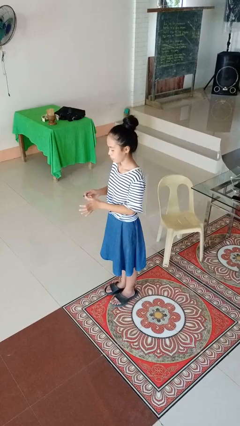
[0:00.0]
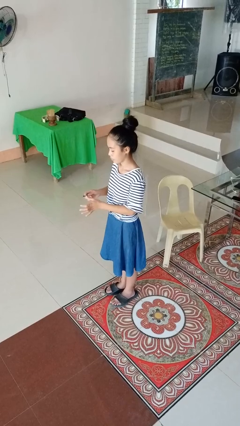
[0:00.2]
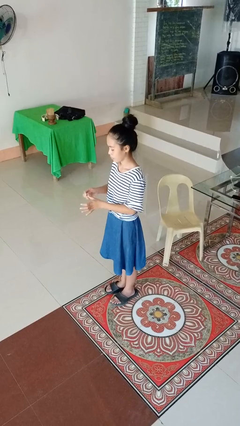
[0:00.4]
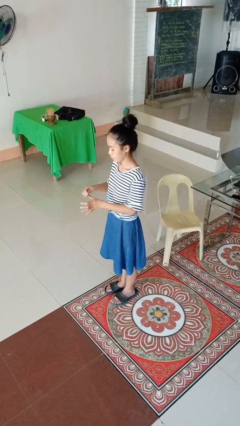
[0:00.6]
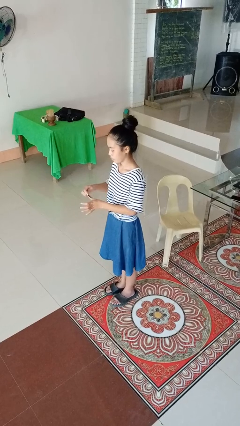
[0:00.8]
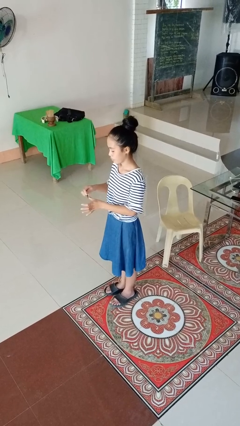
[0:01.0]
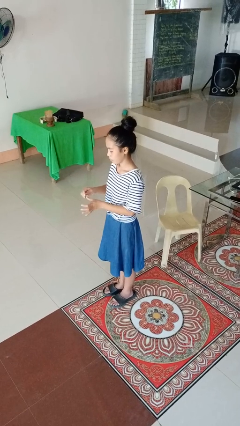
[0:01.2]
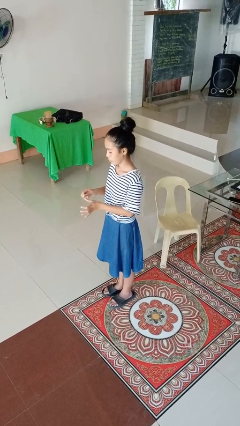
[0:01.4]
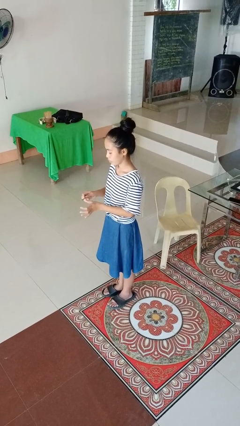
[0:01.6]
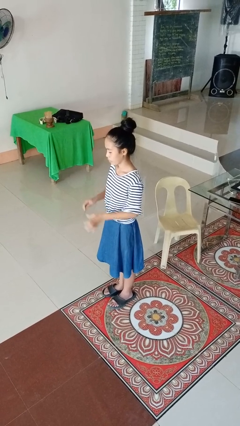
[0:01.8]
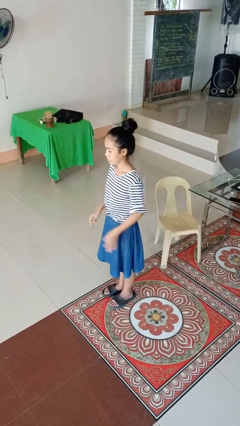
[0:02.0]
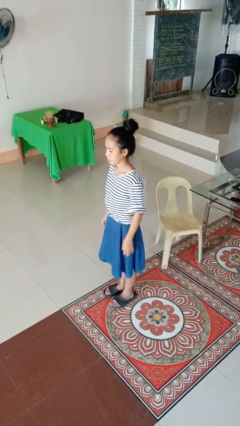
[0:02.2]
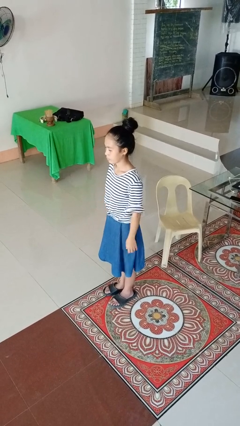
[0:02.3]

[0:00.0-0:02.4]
person files fingernails

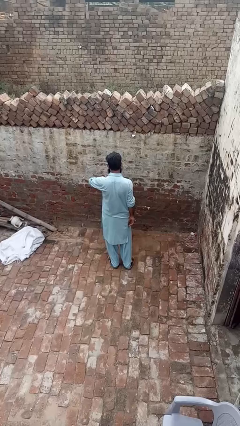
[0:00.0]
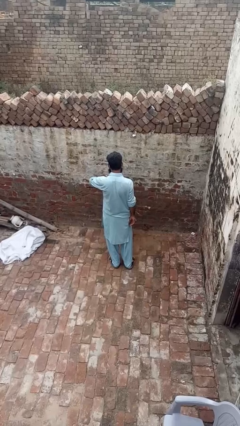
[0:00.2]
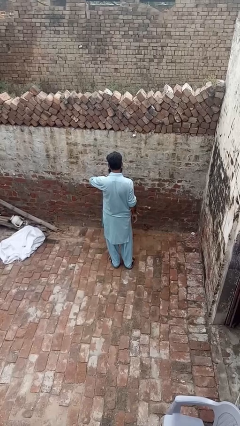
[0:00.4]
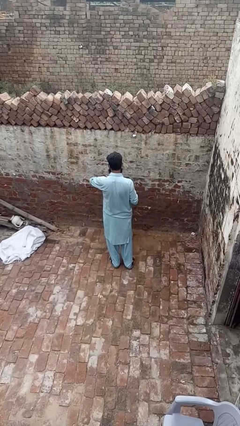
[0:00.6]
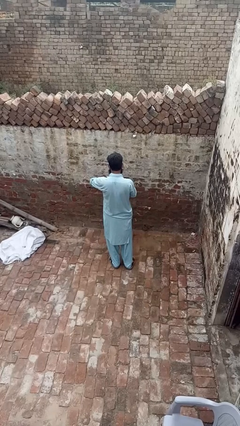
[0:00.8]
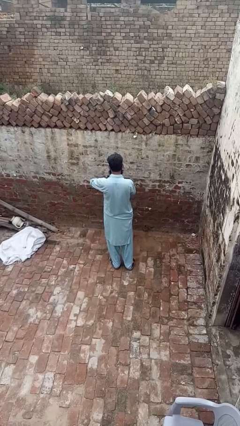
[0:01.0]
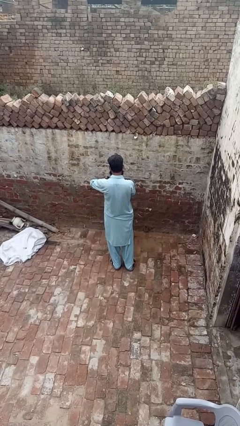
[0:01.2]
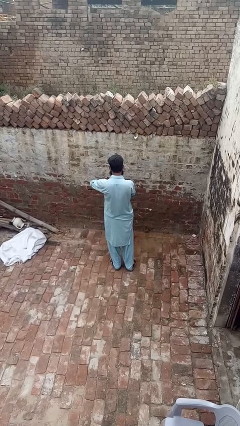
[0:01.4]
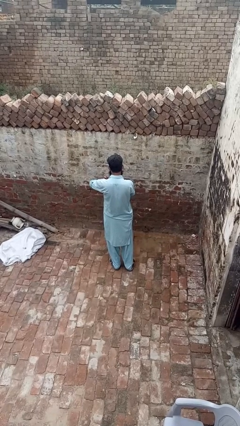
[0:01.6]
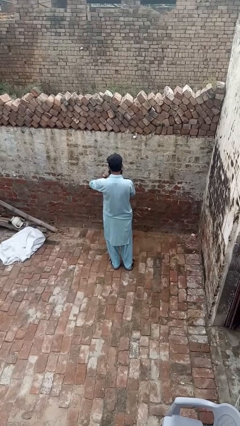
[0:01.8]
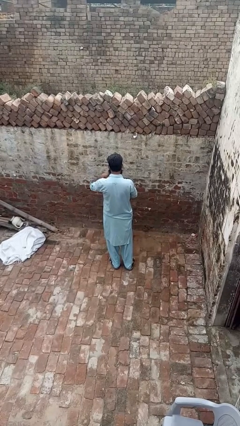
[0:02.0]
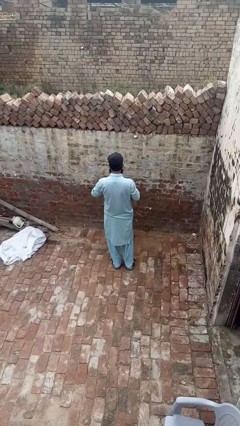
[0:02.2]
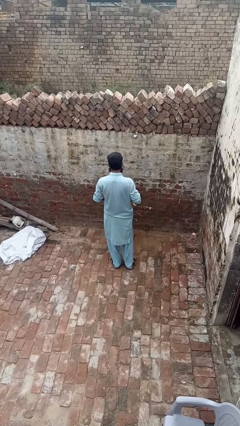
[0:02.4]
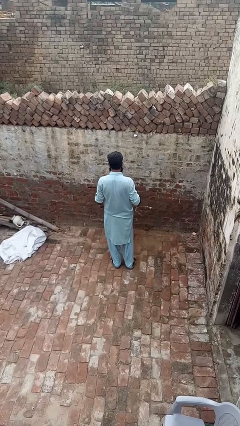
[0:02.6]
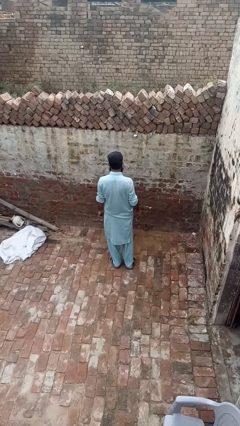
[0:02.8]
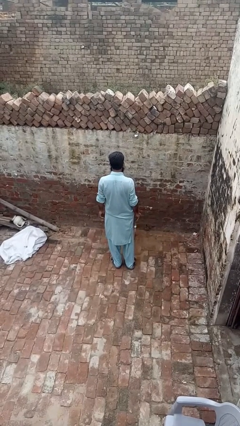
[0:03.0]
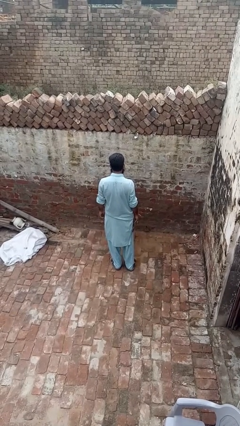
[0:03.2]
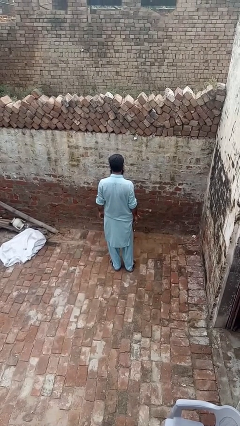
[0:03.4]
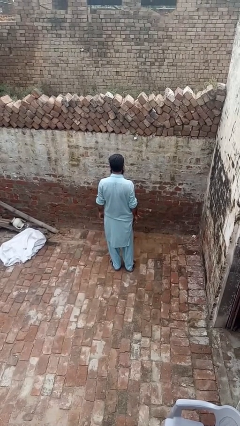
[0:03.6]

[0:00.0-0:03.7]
person takes off wristwatch

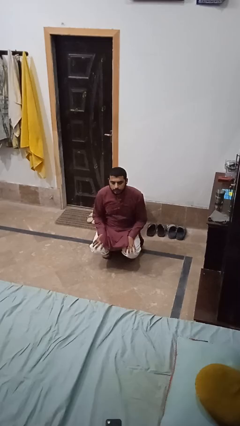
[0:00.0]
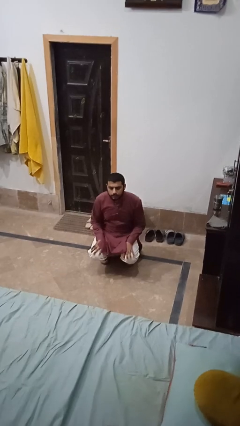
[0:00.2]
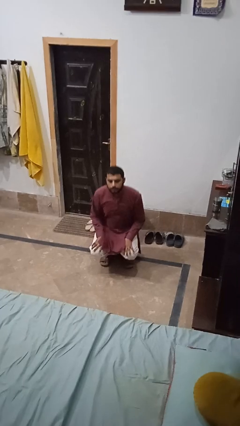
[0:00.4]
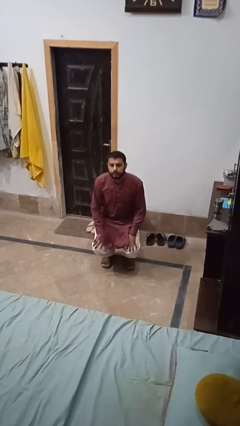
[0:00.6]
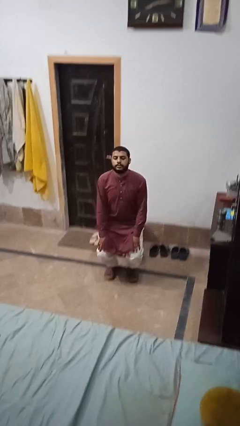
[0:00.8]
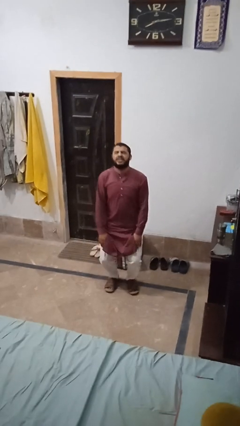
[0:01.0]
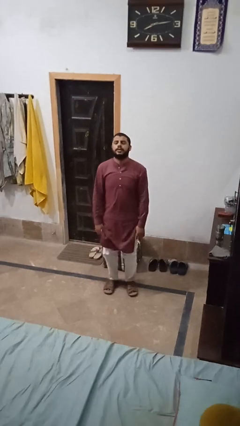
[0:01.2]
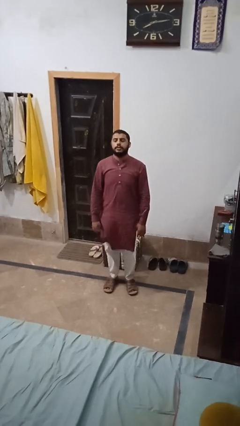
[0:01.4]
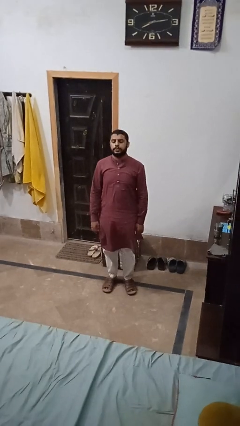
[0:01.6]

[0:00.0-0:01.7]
person stands up

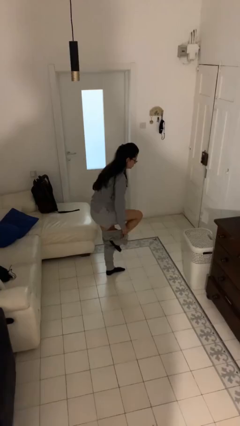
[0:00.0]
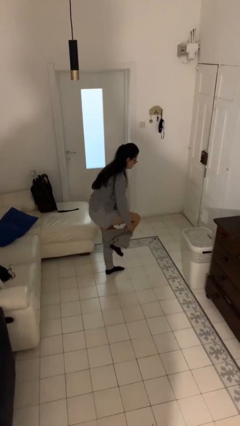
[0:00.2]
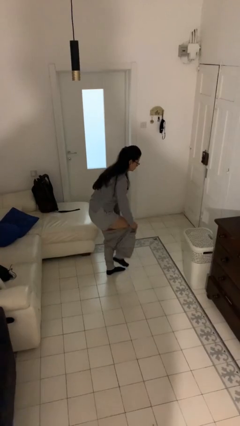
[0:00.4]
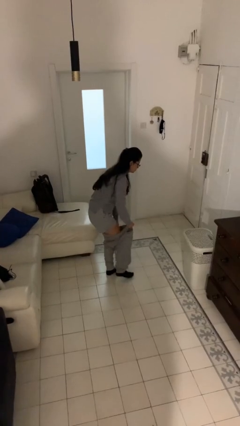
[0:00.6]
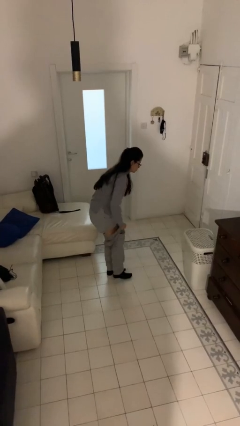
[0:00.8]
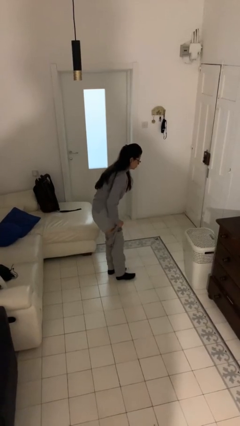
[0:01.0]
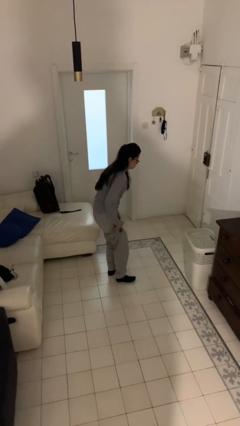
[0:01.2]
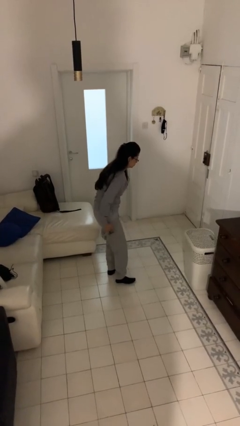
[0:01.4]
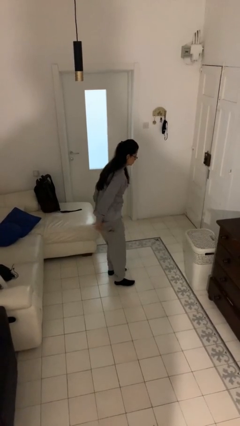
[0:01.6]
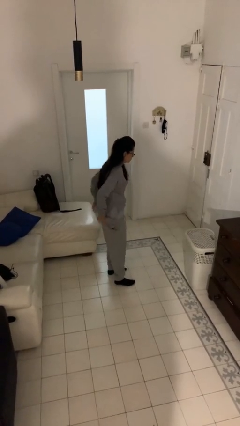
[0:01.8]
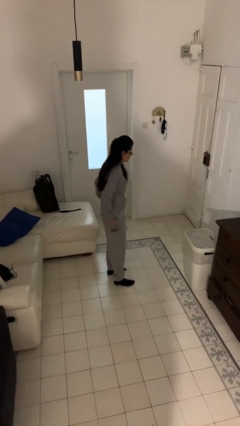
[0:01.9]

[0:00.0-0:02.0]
person puts on pants

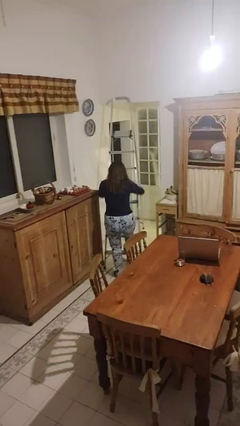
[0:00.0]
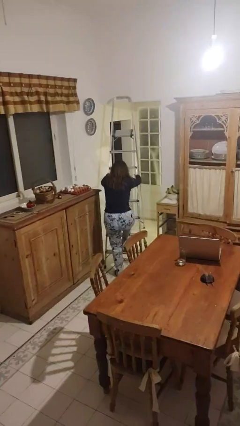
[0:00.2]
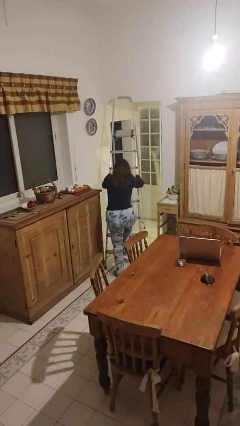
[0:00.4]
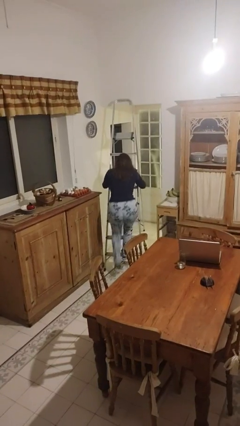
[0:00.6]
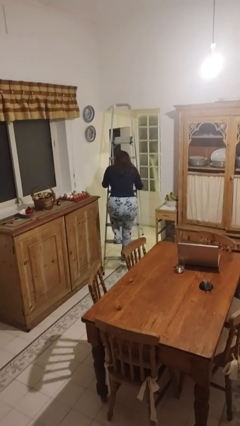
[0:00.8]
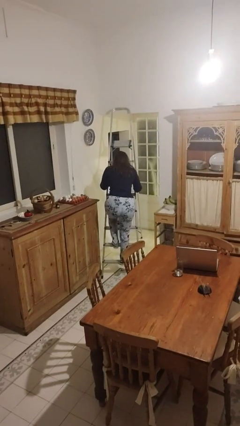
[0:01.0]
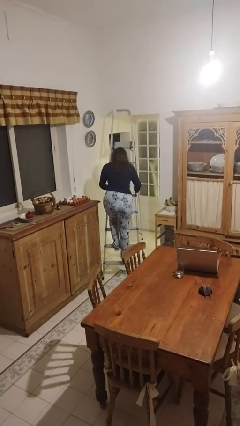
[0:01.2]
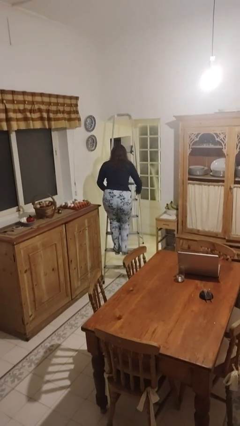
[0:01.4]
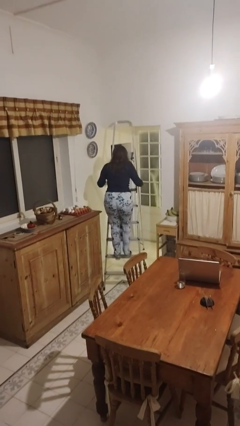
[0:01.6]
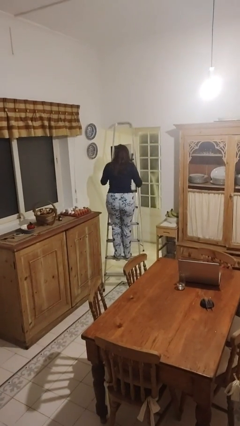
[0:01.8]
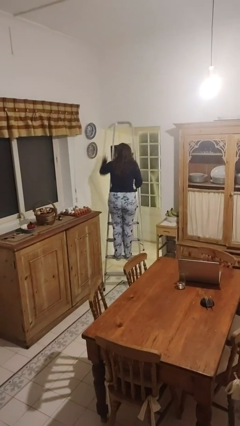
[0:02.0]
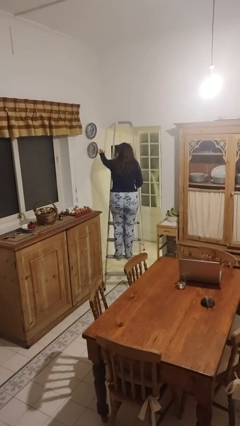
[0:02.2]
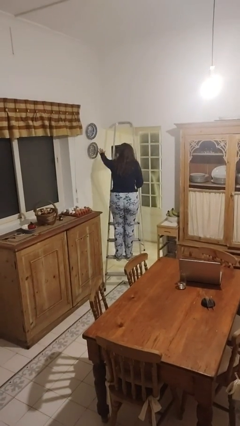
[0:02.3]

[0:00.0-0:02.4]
person climbs up ladder

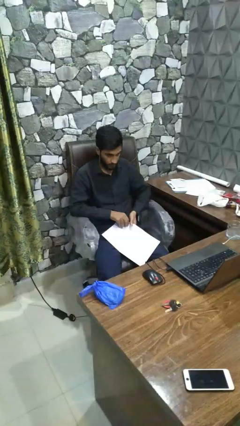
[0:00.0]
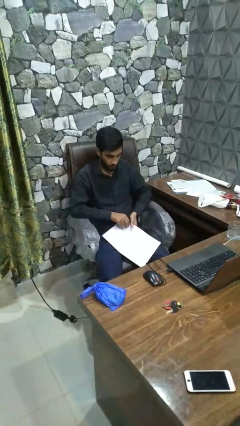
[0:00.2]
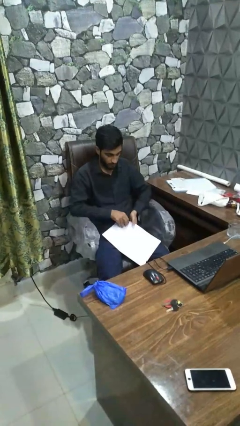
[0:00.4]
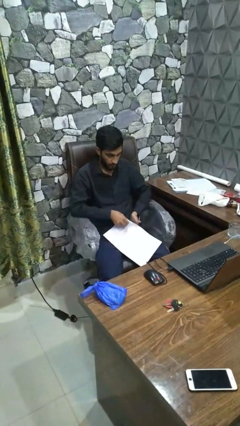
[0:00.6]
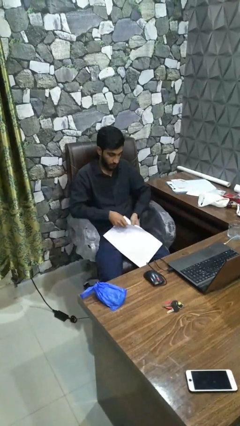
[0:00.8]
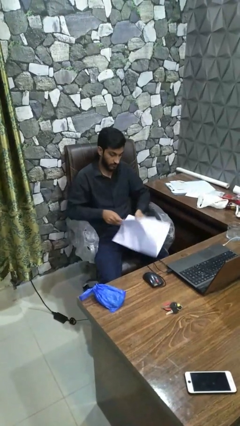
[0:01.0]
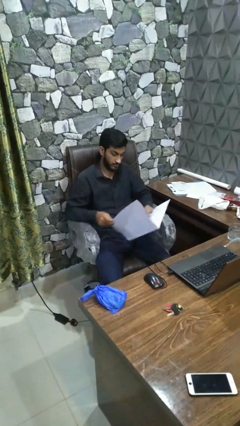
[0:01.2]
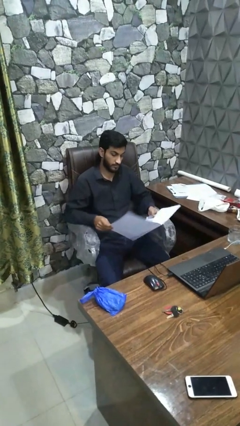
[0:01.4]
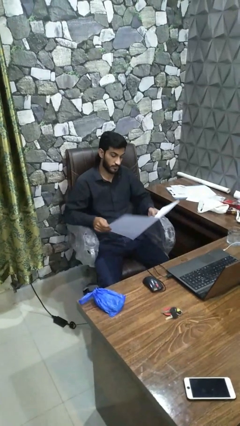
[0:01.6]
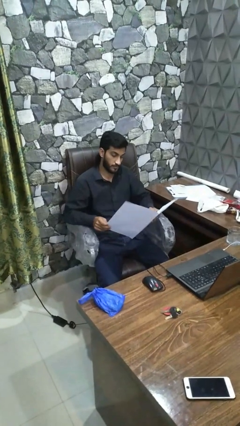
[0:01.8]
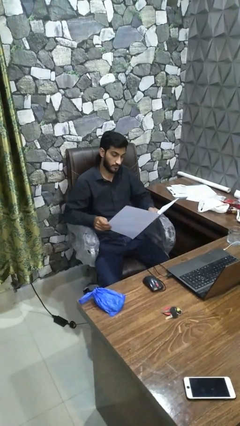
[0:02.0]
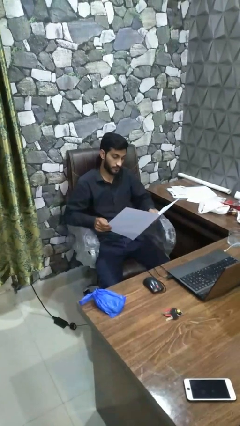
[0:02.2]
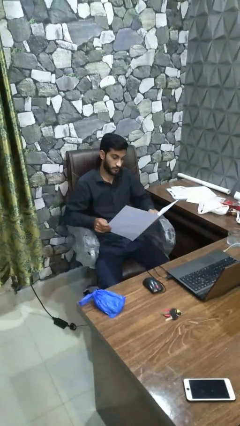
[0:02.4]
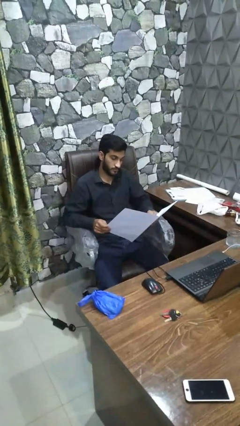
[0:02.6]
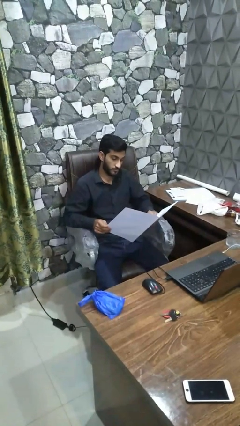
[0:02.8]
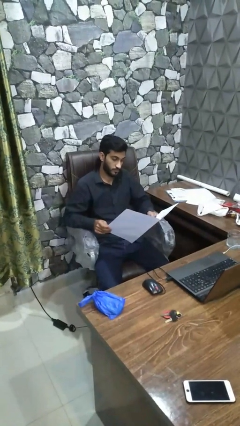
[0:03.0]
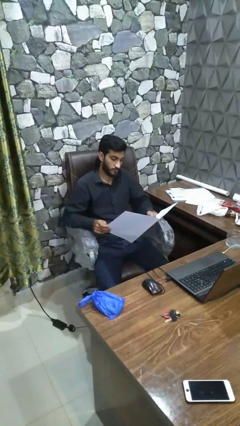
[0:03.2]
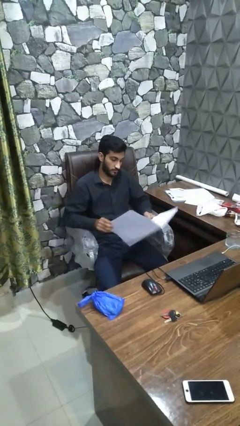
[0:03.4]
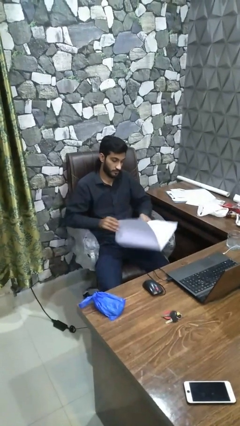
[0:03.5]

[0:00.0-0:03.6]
person reads magazine

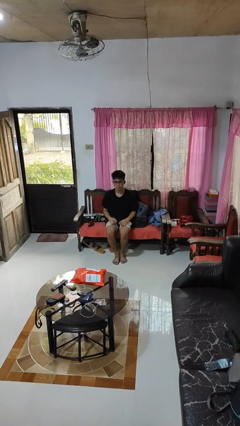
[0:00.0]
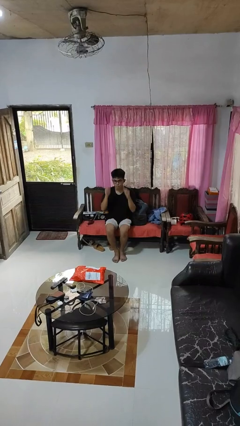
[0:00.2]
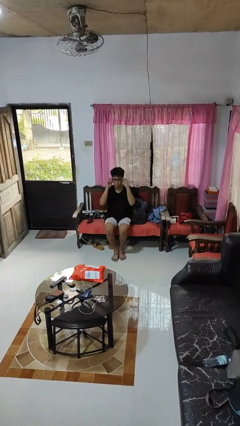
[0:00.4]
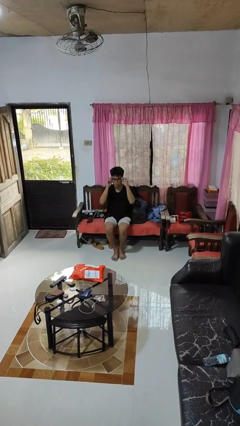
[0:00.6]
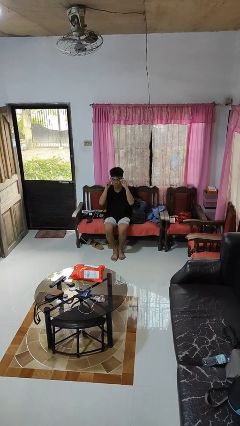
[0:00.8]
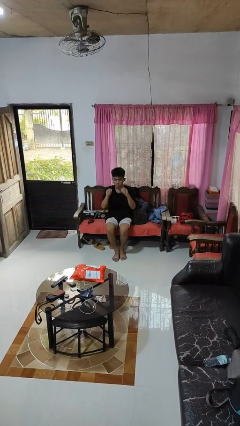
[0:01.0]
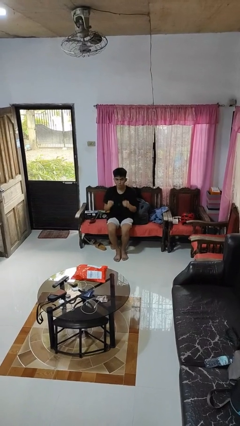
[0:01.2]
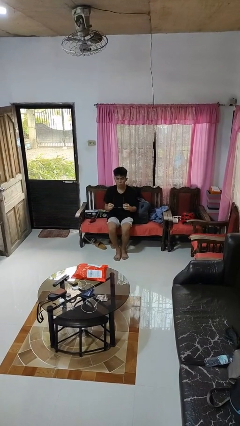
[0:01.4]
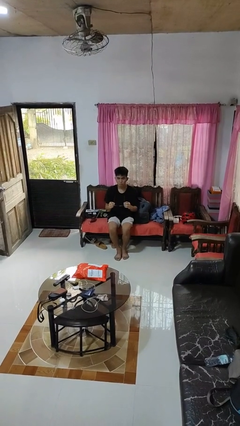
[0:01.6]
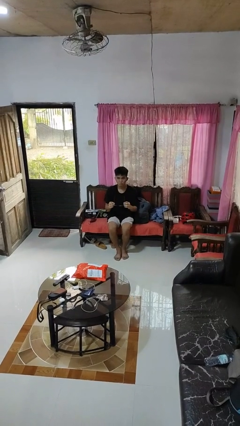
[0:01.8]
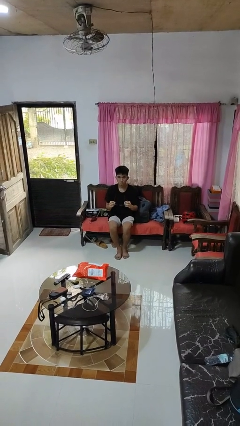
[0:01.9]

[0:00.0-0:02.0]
person takes off glasses
